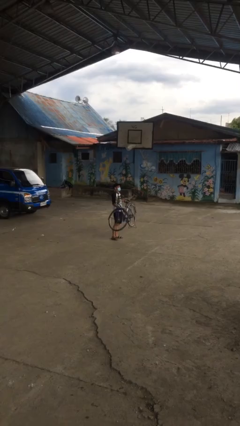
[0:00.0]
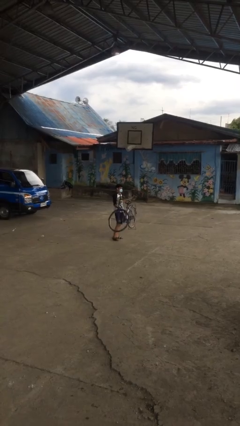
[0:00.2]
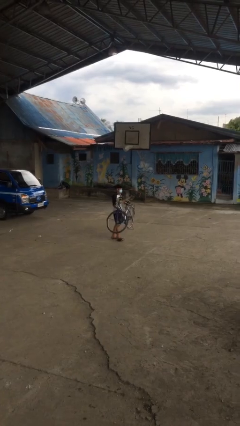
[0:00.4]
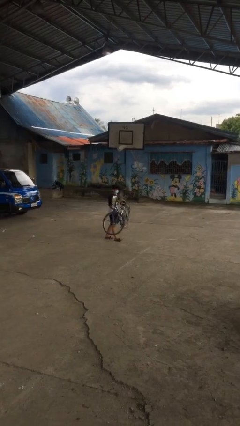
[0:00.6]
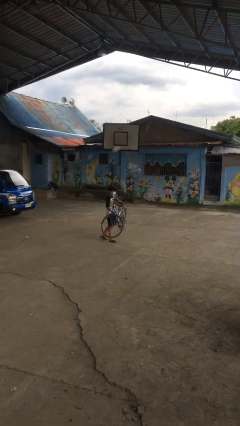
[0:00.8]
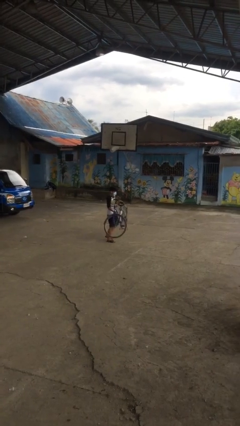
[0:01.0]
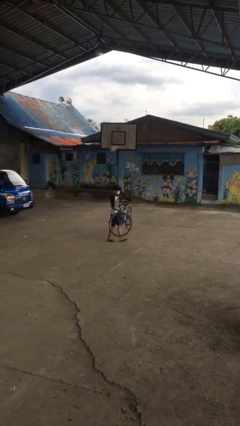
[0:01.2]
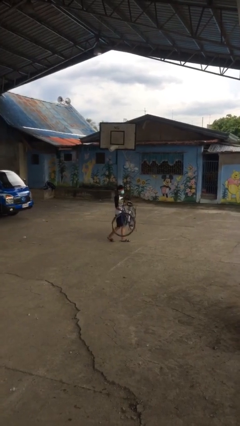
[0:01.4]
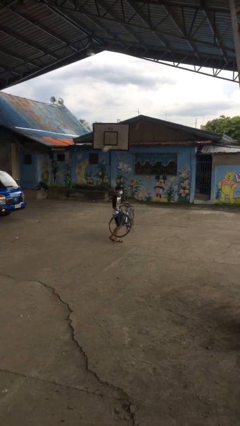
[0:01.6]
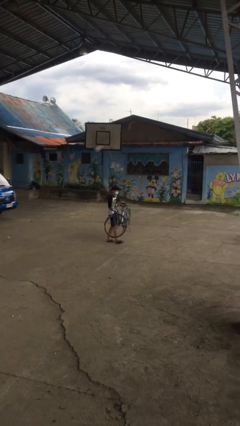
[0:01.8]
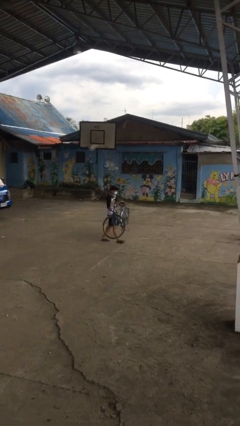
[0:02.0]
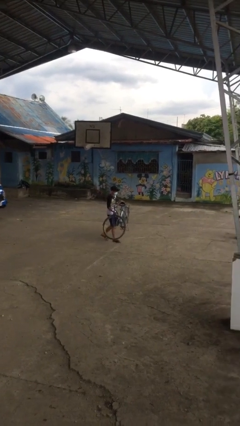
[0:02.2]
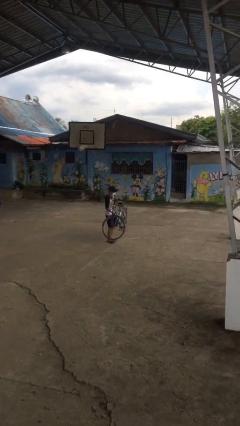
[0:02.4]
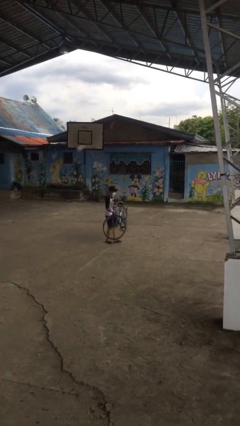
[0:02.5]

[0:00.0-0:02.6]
person carries heavy object

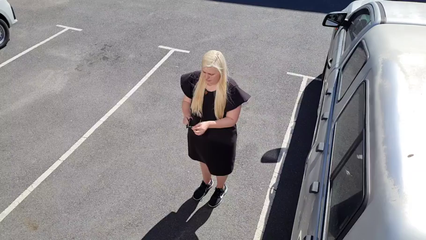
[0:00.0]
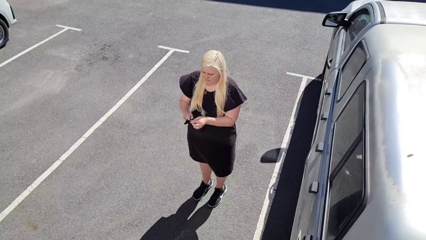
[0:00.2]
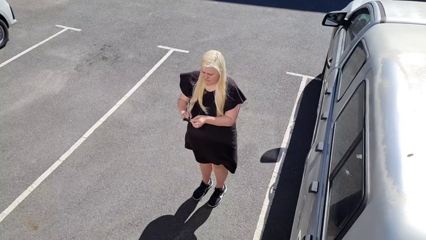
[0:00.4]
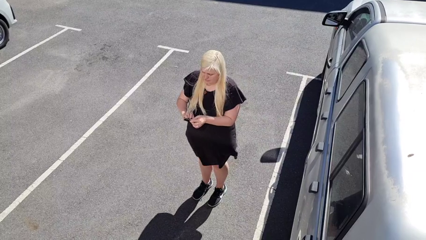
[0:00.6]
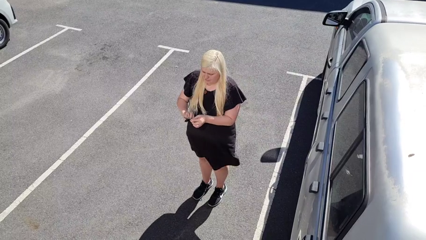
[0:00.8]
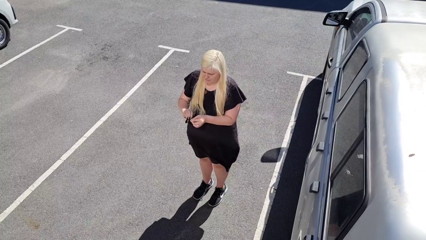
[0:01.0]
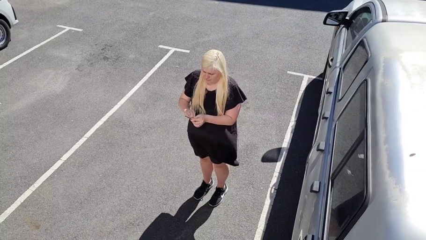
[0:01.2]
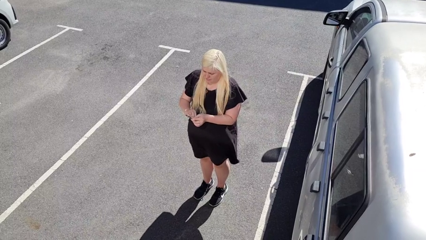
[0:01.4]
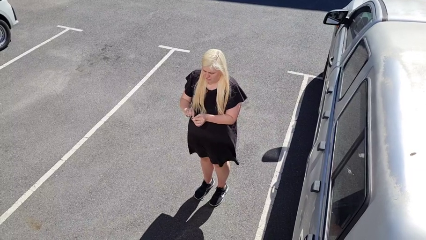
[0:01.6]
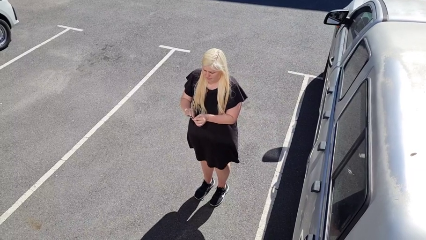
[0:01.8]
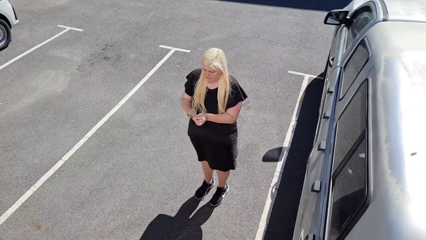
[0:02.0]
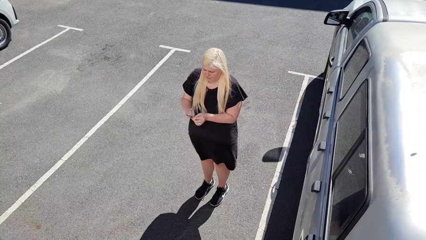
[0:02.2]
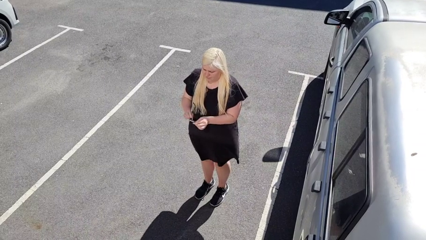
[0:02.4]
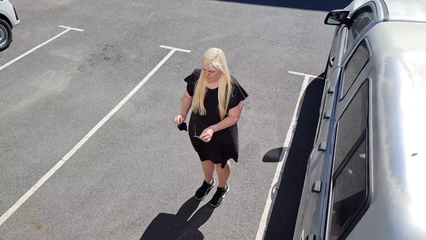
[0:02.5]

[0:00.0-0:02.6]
person cleans eyeglasses

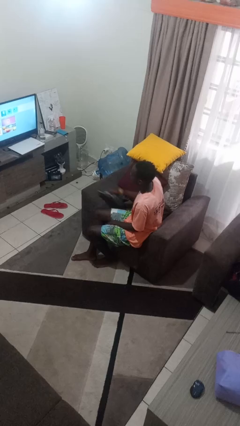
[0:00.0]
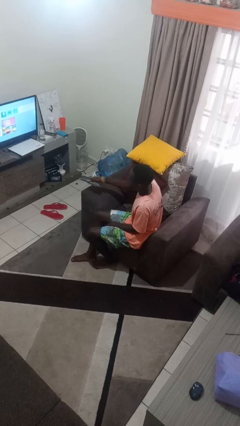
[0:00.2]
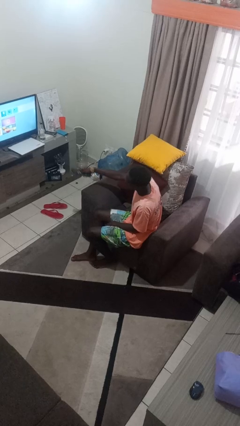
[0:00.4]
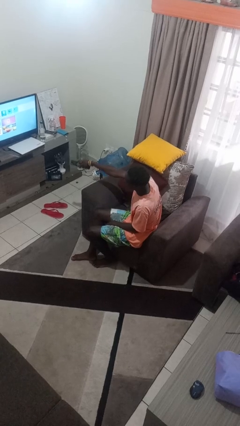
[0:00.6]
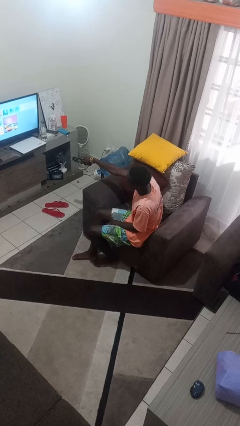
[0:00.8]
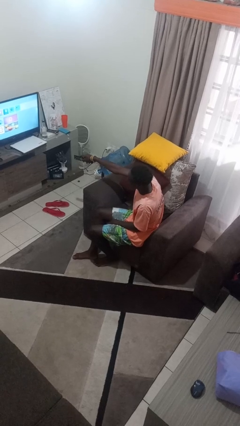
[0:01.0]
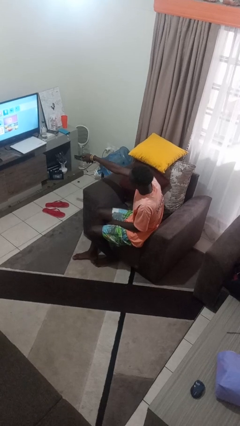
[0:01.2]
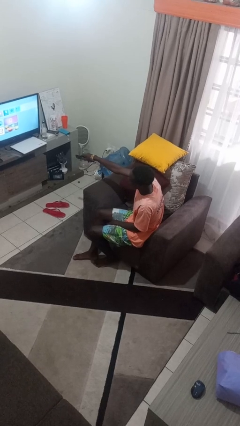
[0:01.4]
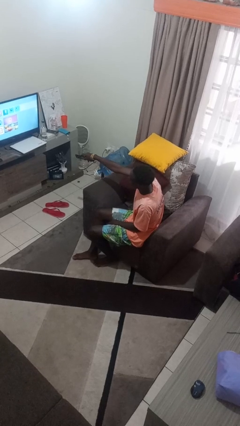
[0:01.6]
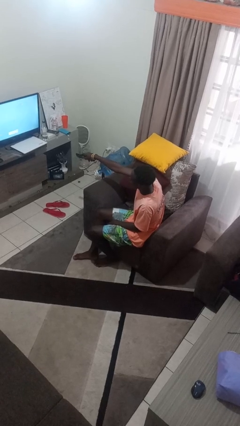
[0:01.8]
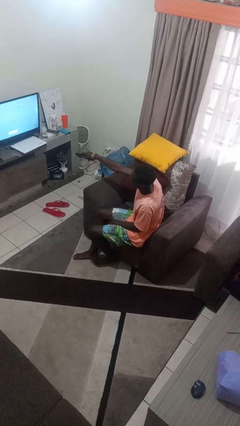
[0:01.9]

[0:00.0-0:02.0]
person uses television remote

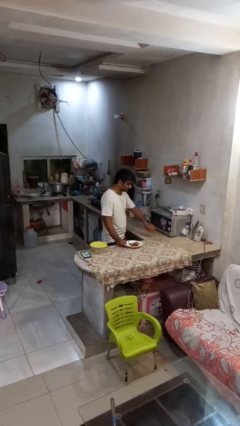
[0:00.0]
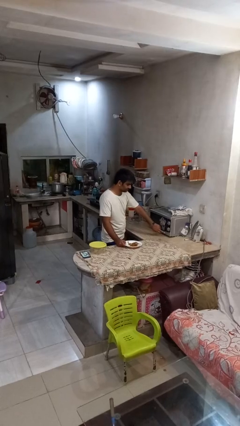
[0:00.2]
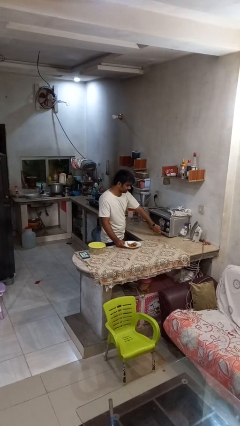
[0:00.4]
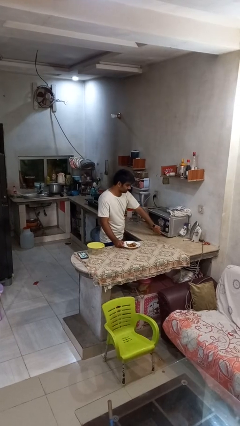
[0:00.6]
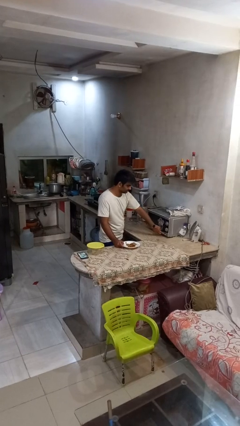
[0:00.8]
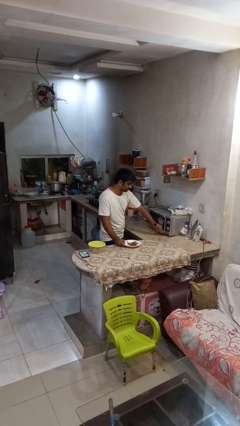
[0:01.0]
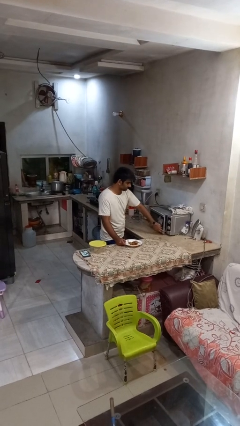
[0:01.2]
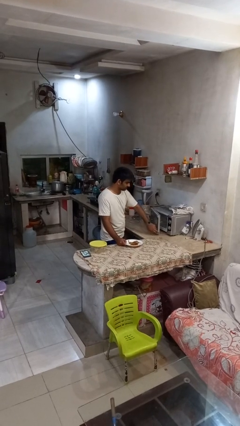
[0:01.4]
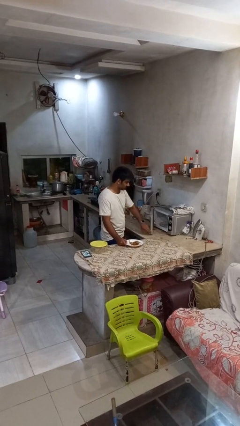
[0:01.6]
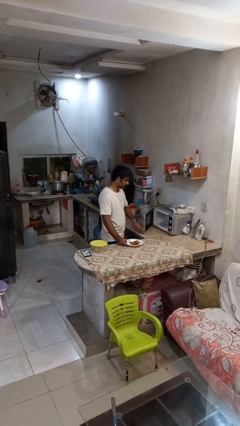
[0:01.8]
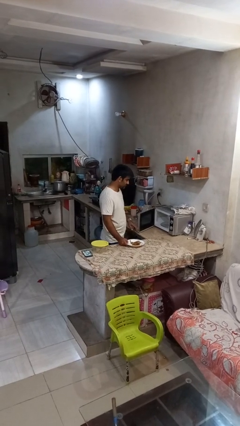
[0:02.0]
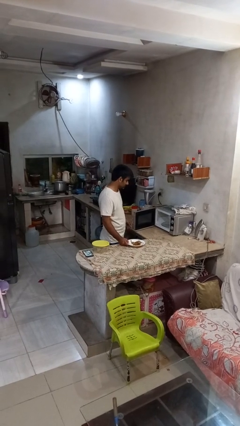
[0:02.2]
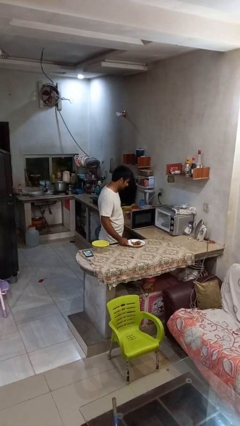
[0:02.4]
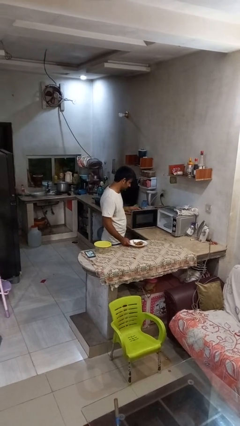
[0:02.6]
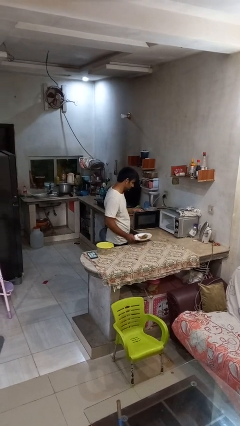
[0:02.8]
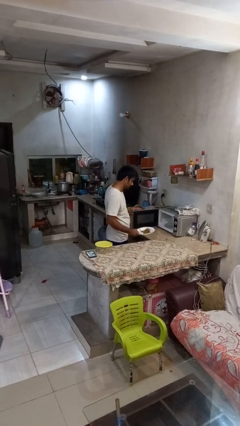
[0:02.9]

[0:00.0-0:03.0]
person opens microwave

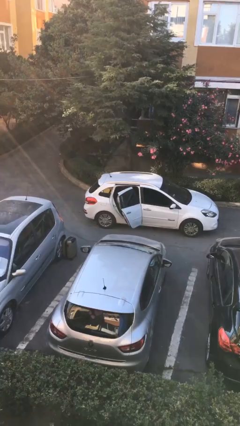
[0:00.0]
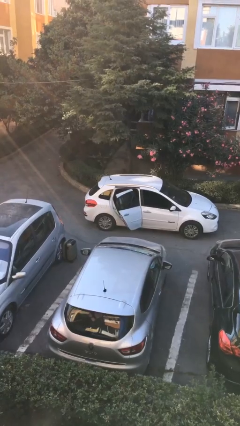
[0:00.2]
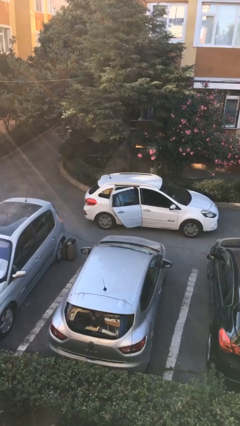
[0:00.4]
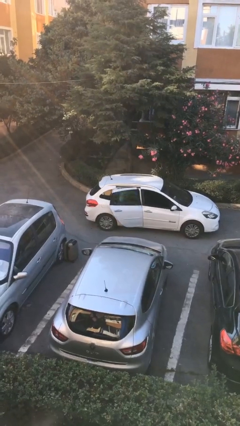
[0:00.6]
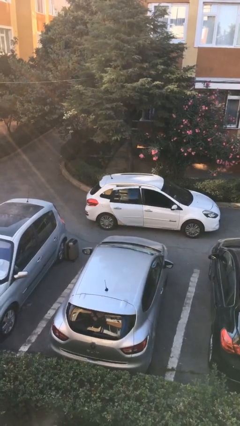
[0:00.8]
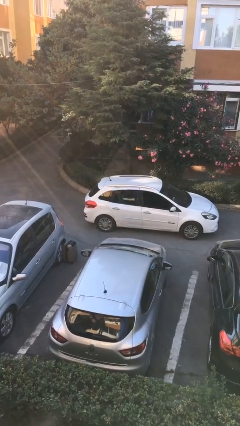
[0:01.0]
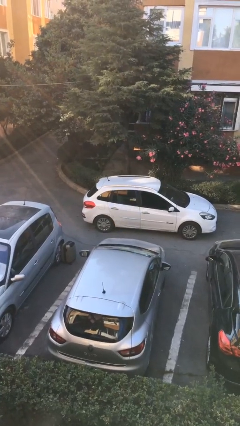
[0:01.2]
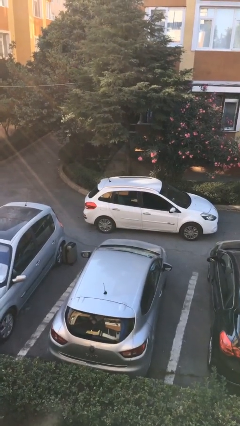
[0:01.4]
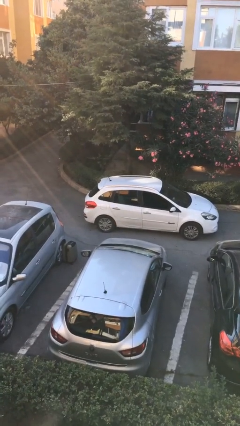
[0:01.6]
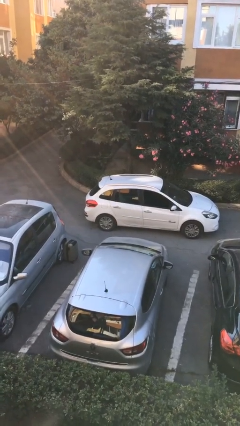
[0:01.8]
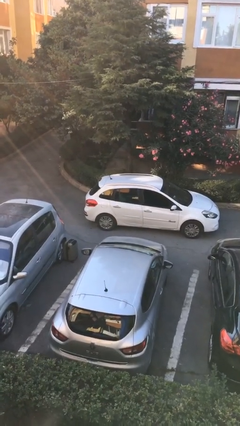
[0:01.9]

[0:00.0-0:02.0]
person closes car door

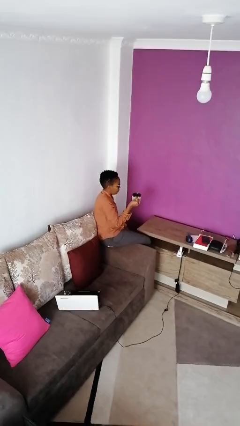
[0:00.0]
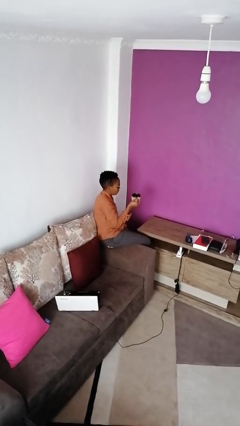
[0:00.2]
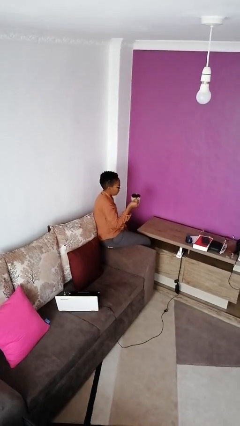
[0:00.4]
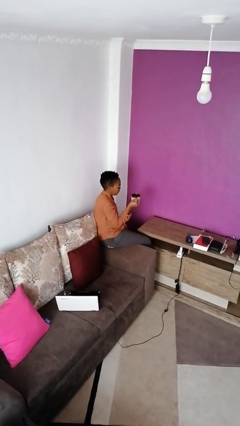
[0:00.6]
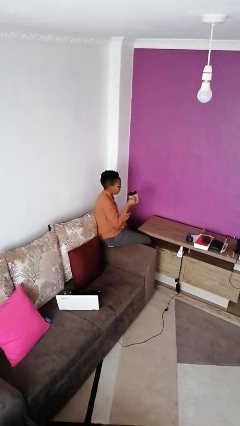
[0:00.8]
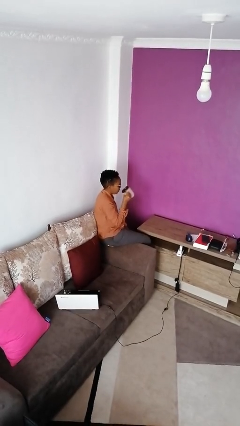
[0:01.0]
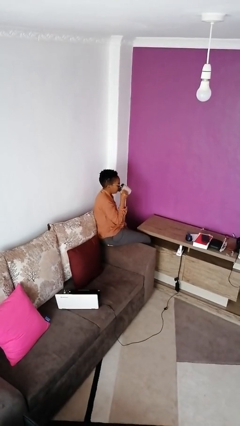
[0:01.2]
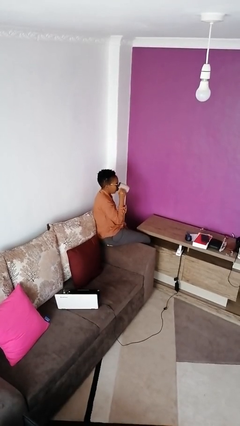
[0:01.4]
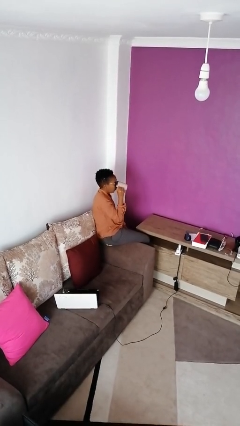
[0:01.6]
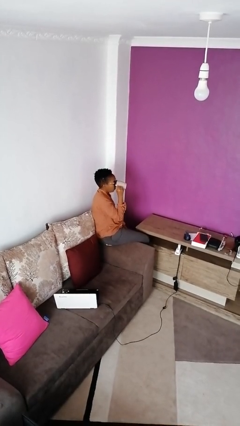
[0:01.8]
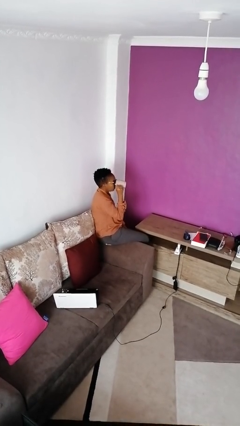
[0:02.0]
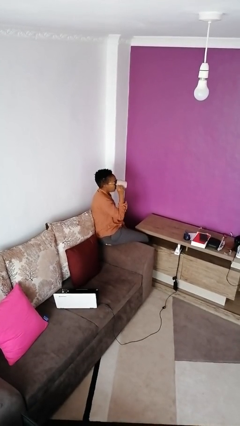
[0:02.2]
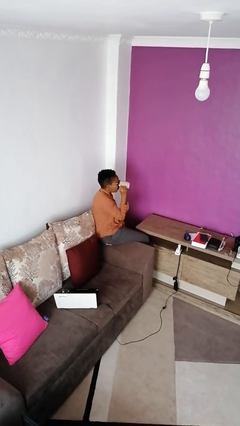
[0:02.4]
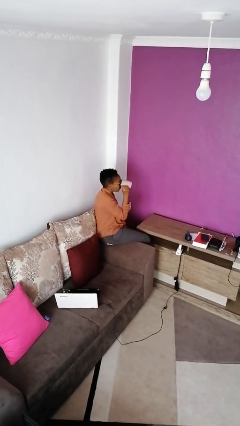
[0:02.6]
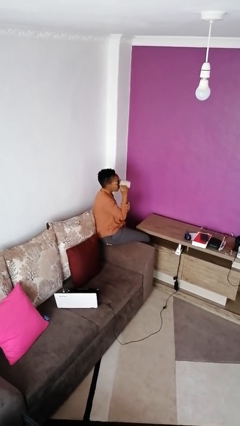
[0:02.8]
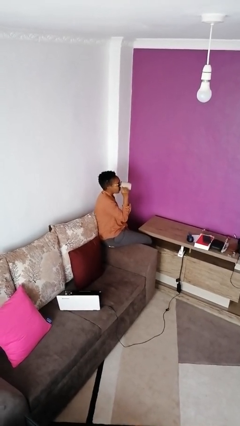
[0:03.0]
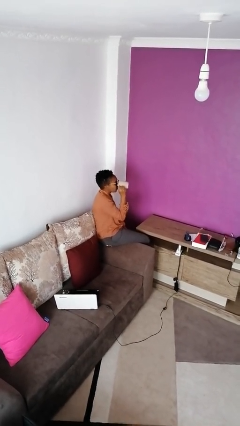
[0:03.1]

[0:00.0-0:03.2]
person drinks from mug

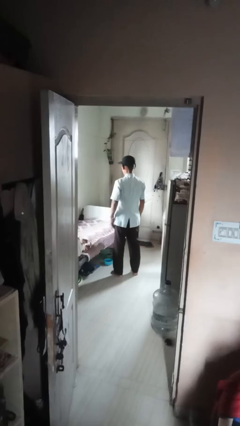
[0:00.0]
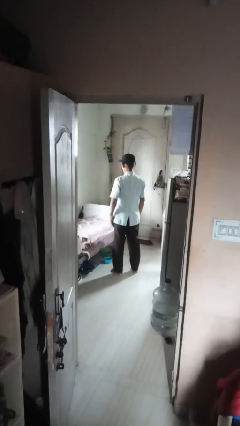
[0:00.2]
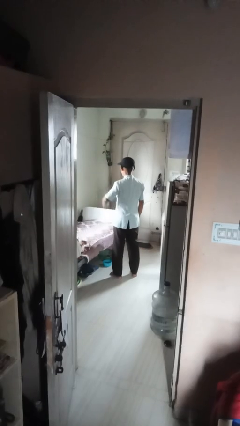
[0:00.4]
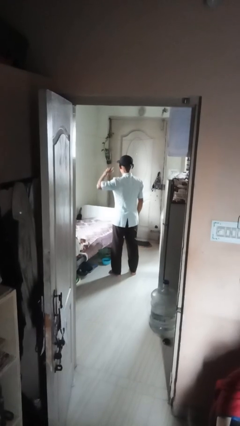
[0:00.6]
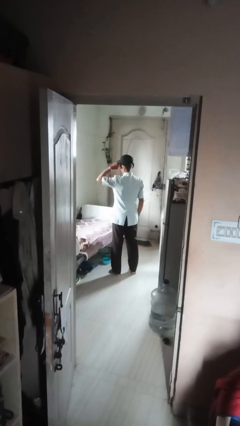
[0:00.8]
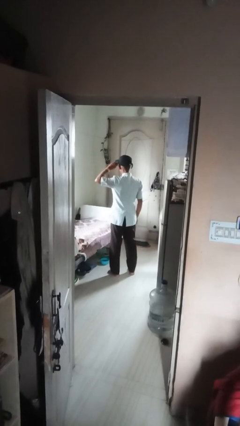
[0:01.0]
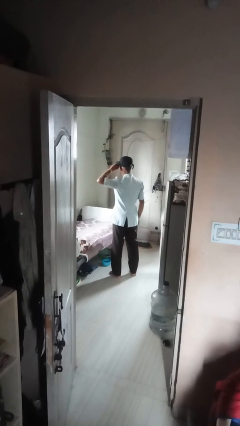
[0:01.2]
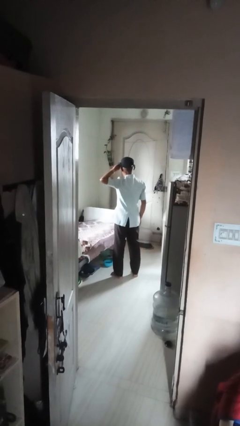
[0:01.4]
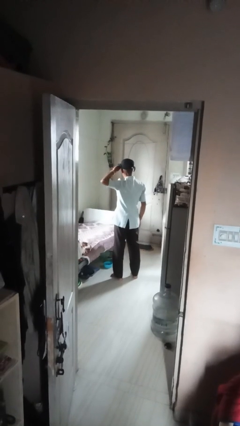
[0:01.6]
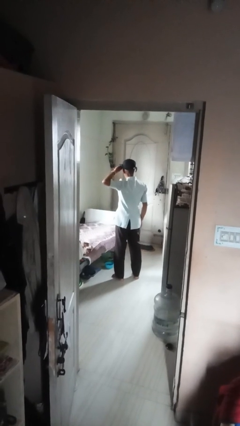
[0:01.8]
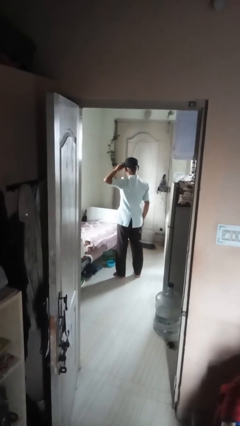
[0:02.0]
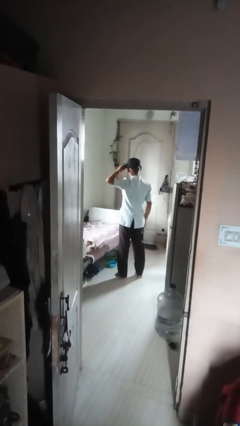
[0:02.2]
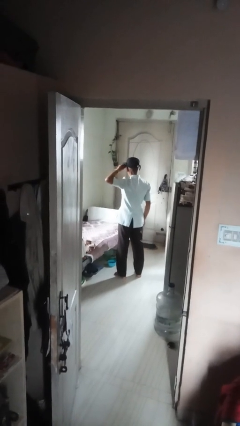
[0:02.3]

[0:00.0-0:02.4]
person salutes
